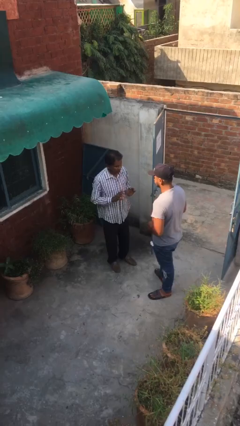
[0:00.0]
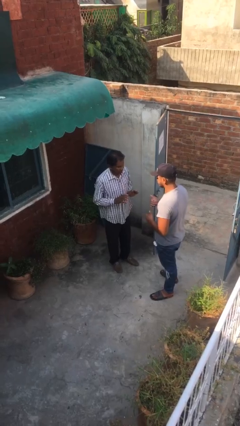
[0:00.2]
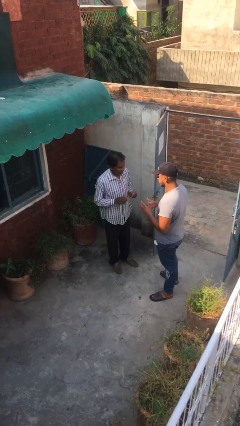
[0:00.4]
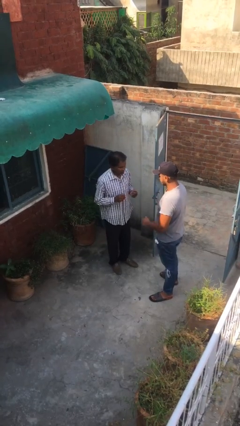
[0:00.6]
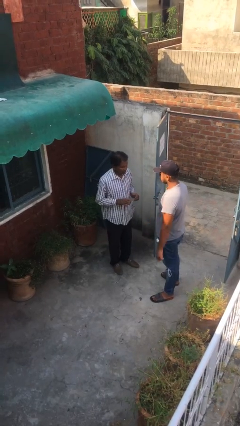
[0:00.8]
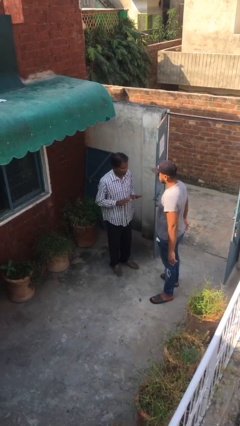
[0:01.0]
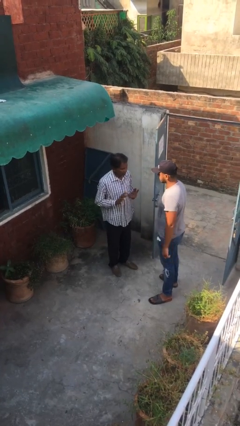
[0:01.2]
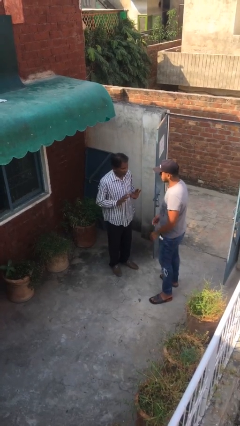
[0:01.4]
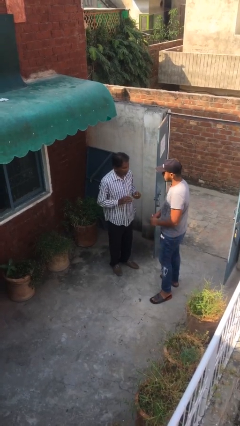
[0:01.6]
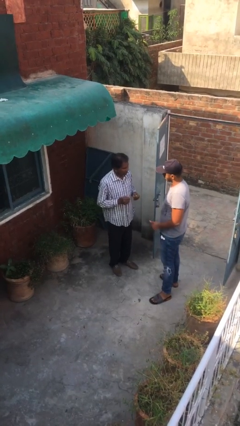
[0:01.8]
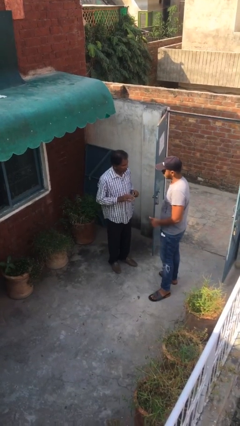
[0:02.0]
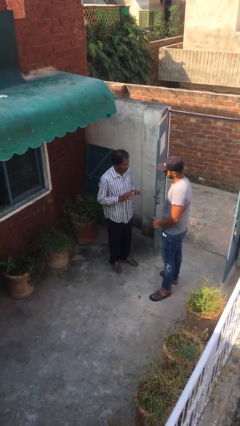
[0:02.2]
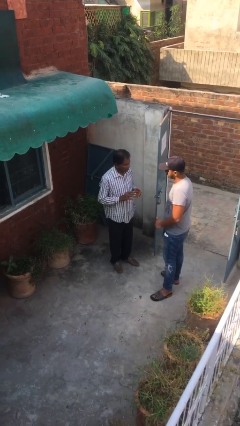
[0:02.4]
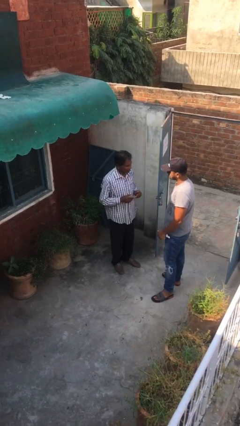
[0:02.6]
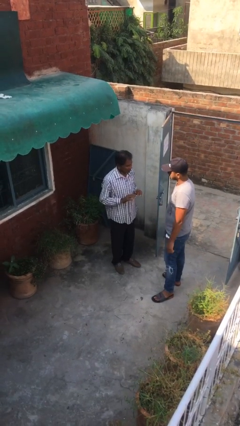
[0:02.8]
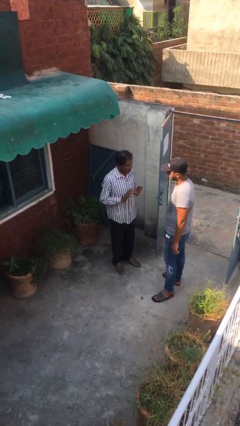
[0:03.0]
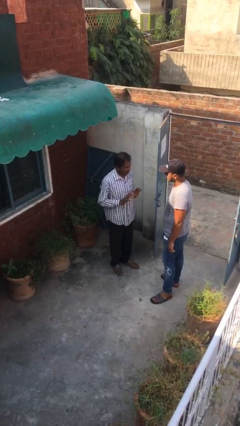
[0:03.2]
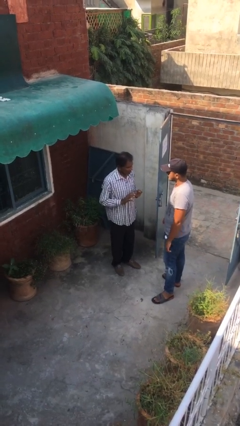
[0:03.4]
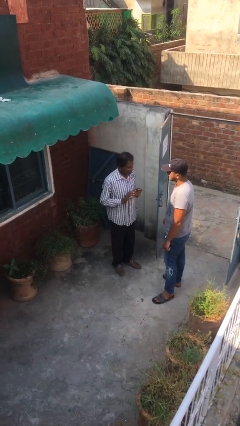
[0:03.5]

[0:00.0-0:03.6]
person talks to person

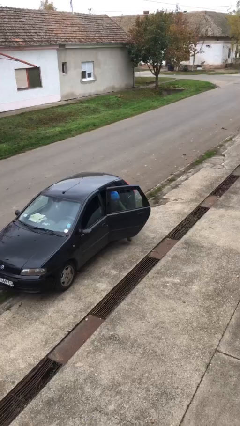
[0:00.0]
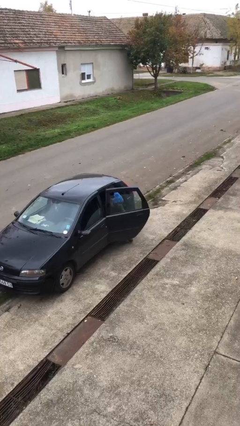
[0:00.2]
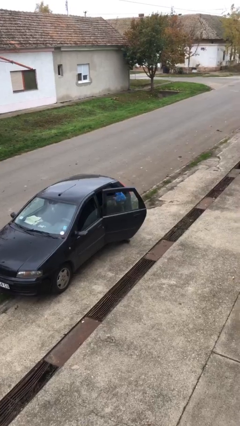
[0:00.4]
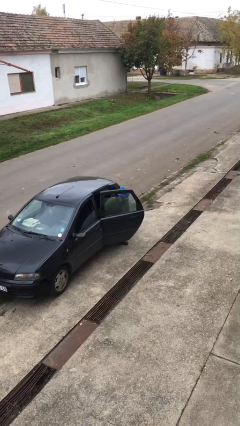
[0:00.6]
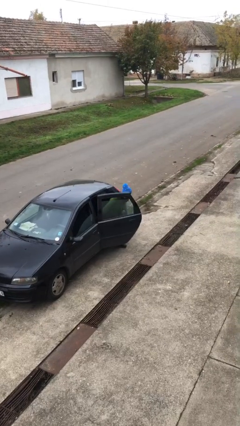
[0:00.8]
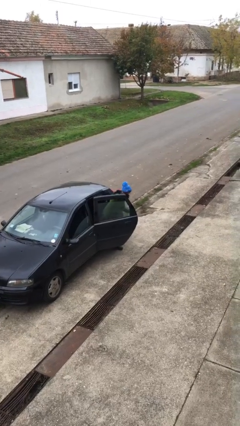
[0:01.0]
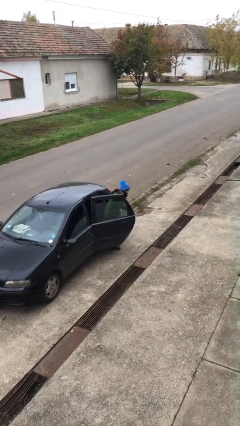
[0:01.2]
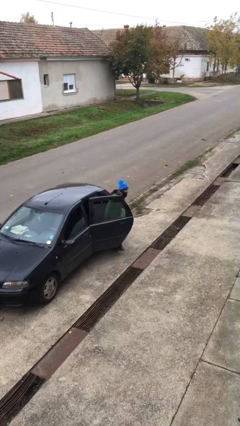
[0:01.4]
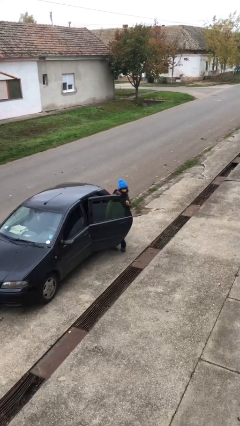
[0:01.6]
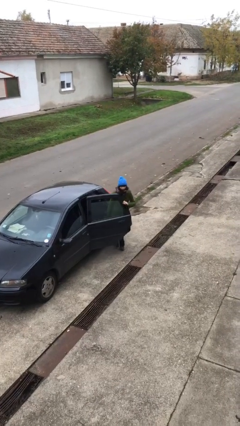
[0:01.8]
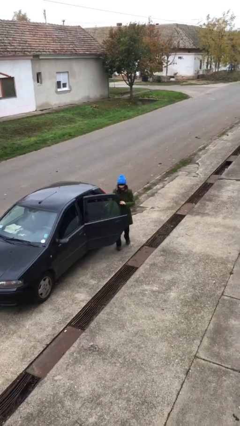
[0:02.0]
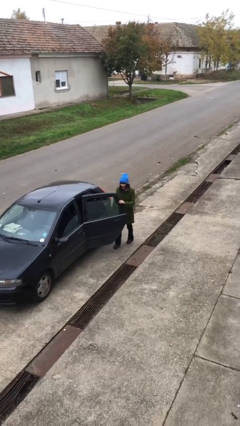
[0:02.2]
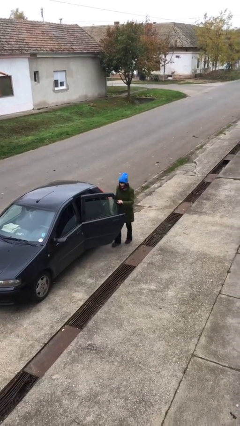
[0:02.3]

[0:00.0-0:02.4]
person exits car

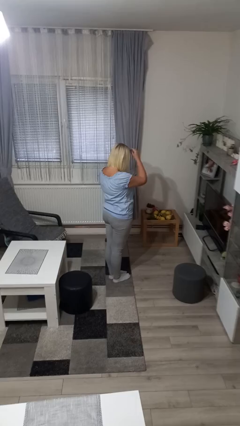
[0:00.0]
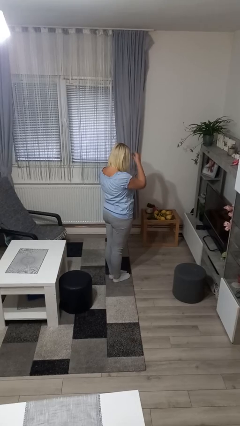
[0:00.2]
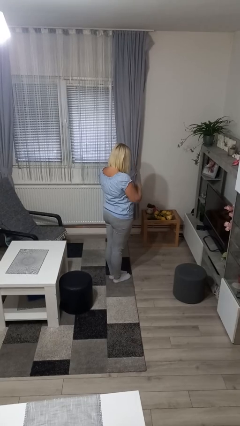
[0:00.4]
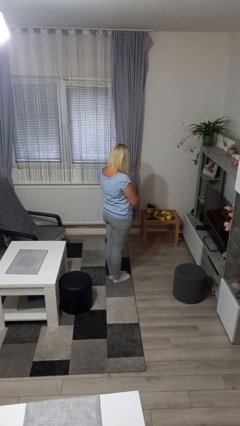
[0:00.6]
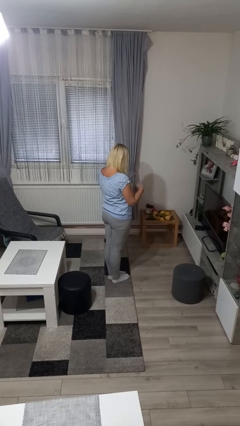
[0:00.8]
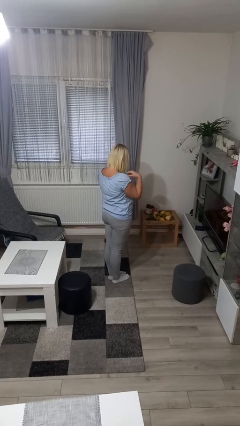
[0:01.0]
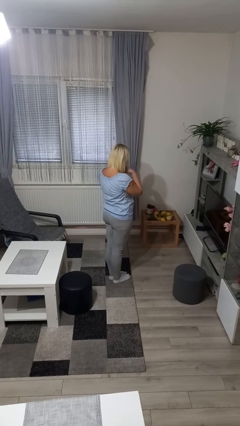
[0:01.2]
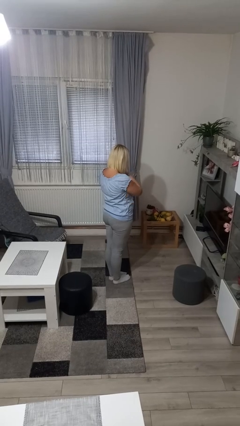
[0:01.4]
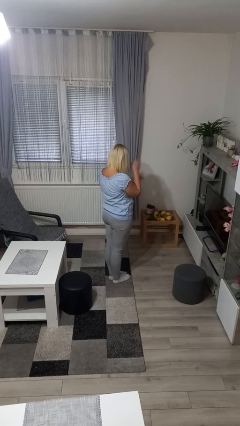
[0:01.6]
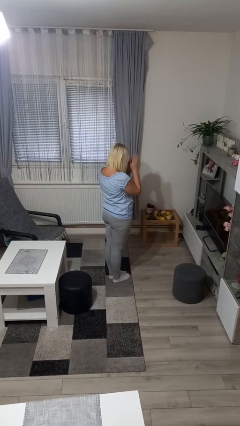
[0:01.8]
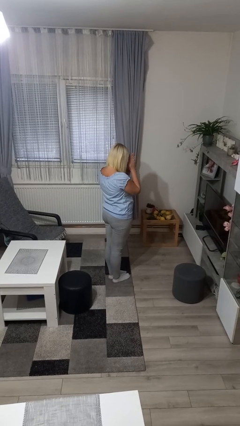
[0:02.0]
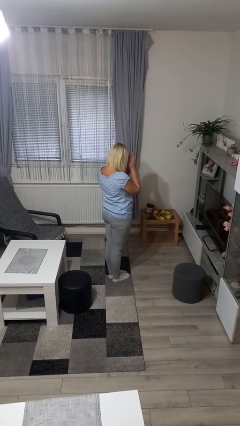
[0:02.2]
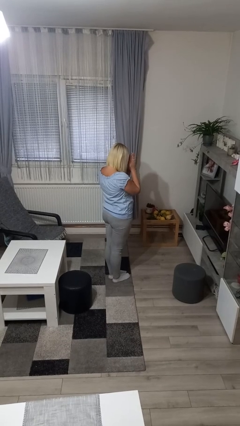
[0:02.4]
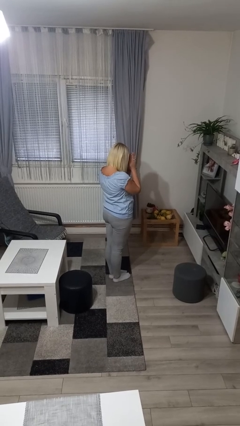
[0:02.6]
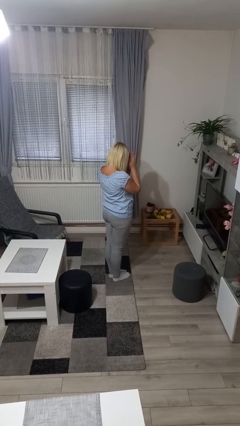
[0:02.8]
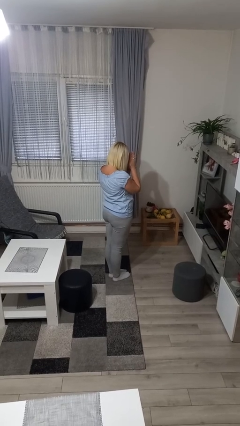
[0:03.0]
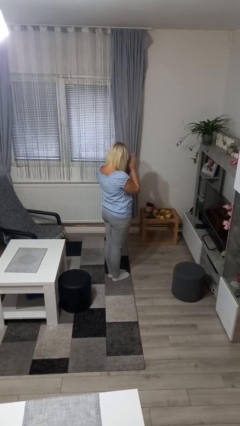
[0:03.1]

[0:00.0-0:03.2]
person prays

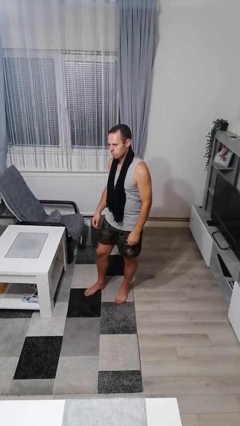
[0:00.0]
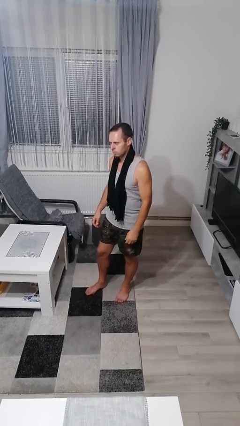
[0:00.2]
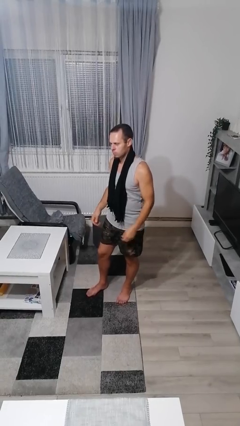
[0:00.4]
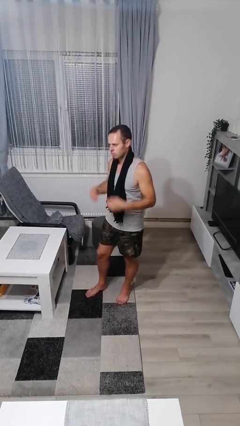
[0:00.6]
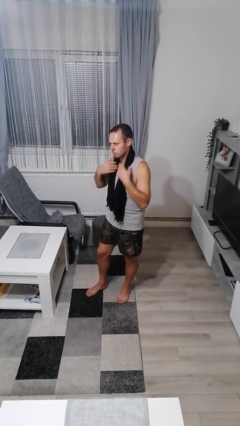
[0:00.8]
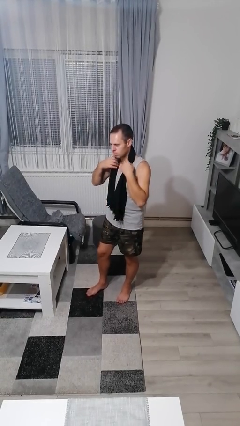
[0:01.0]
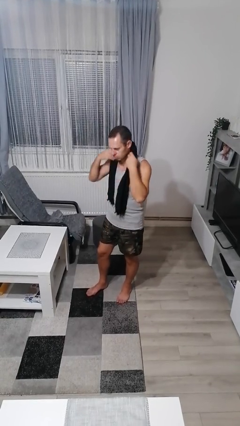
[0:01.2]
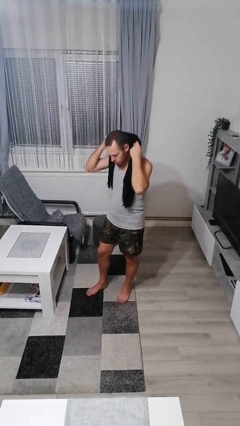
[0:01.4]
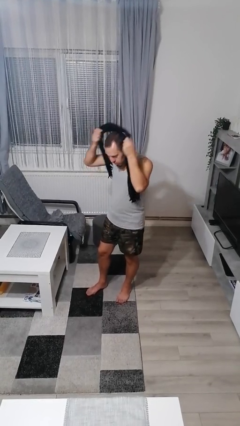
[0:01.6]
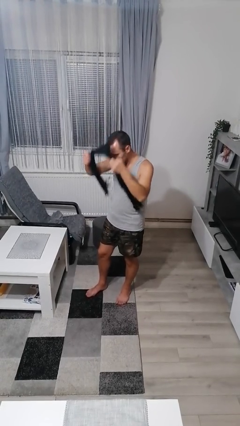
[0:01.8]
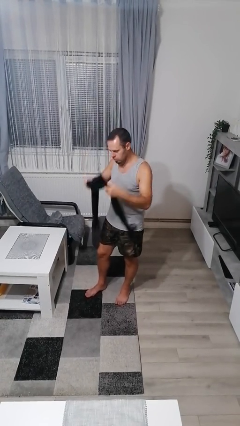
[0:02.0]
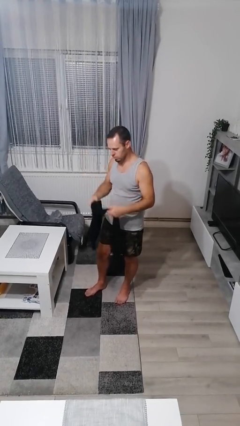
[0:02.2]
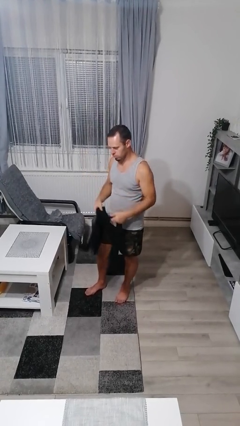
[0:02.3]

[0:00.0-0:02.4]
person takes off scarf

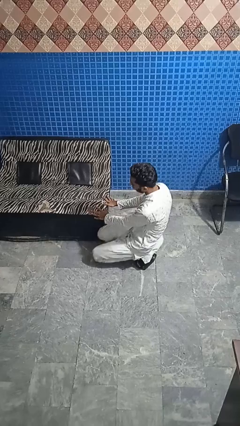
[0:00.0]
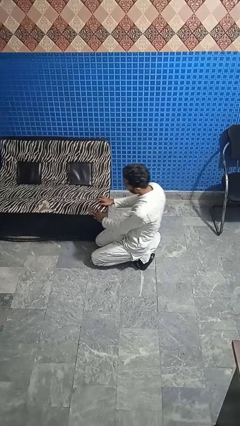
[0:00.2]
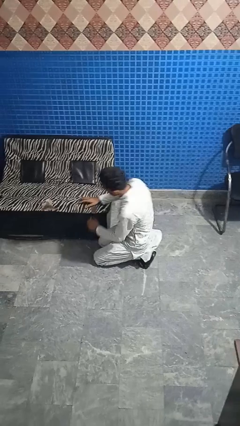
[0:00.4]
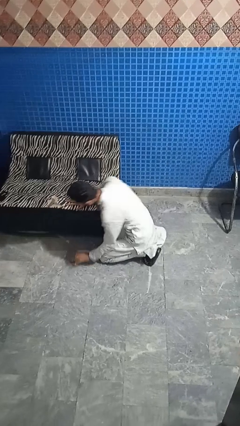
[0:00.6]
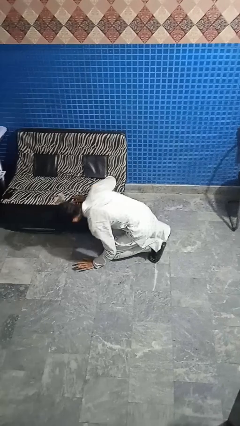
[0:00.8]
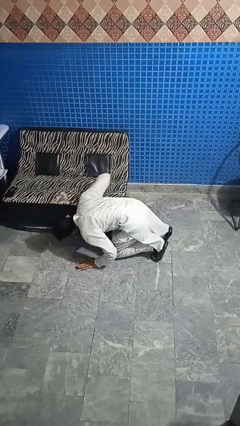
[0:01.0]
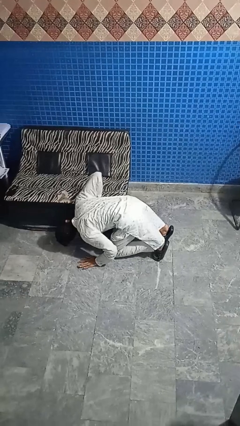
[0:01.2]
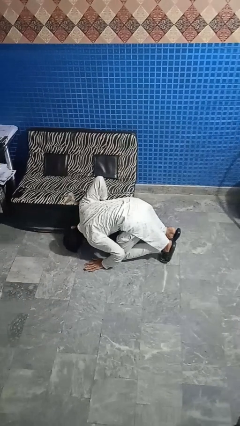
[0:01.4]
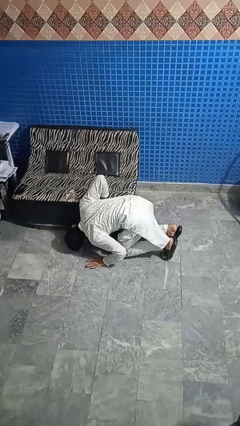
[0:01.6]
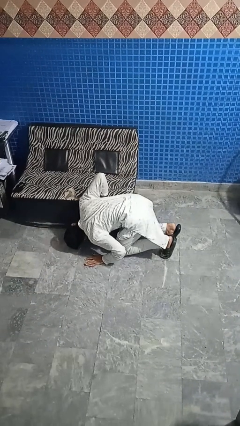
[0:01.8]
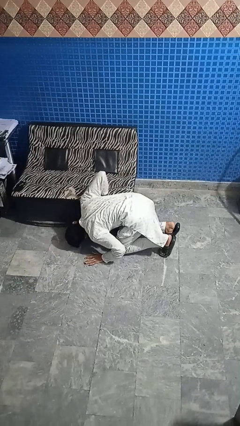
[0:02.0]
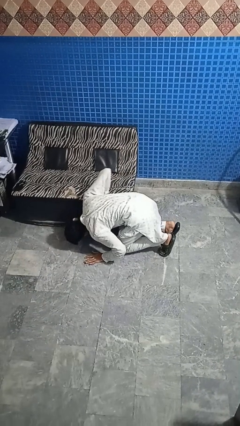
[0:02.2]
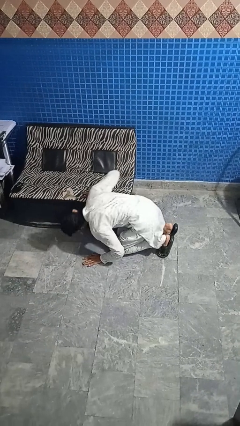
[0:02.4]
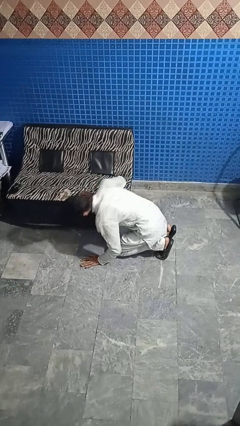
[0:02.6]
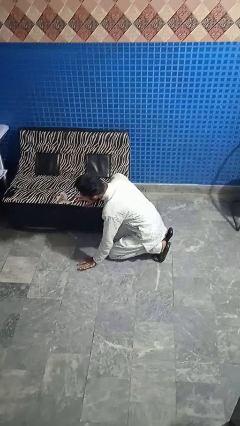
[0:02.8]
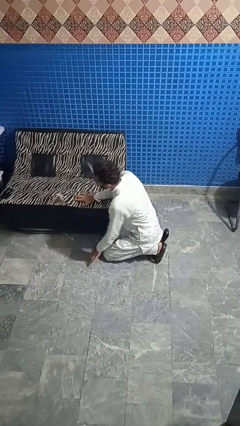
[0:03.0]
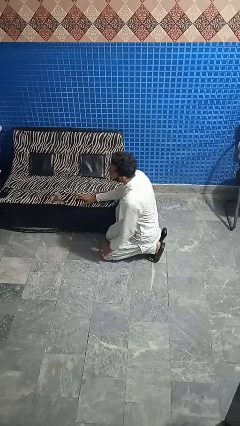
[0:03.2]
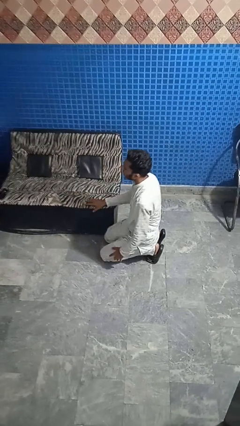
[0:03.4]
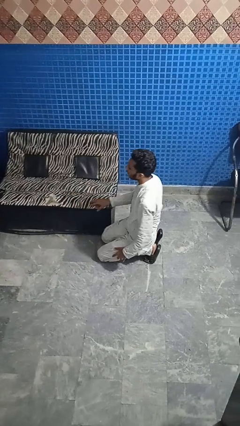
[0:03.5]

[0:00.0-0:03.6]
person searches under couch

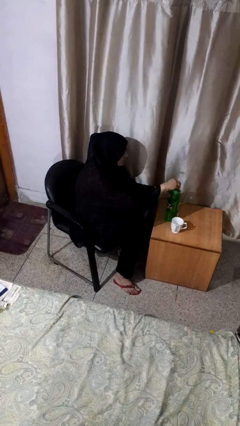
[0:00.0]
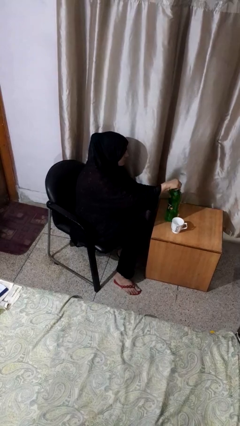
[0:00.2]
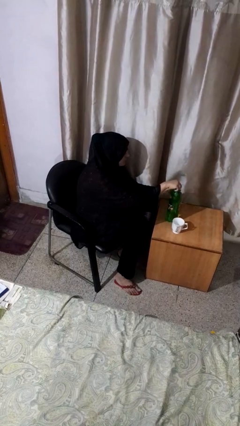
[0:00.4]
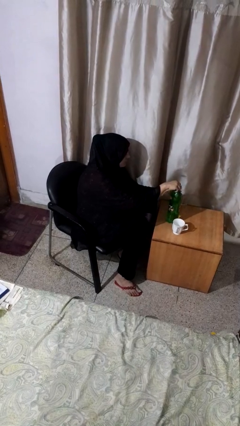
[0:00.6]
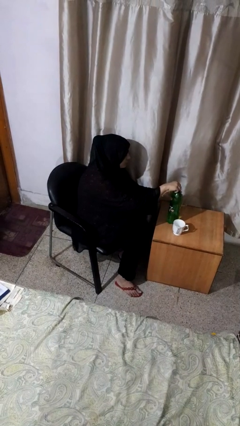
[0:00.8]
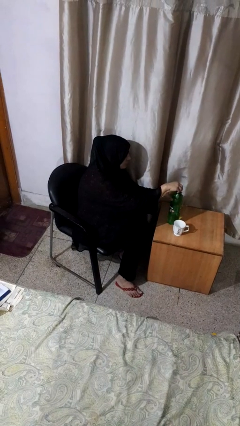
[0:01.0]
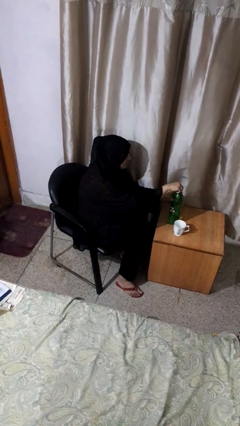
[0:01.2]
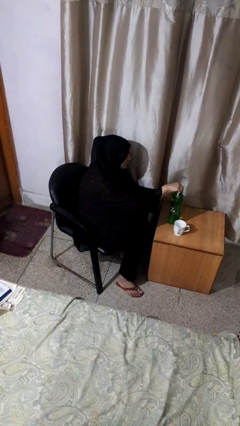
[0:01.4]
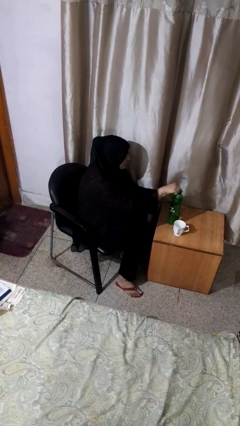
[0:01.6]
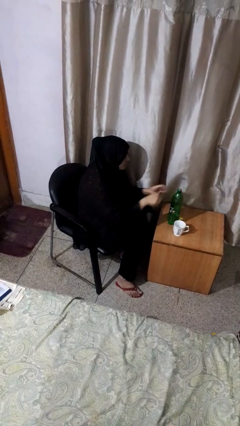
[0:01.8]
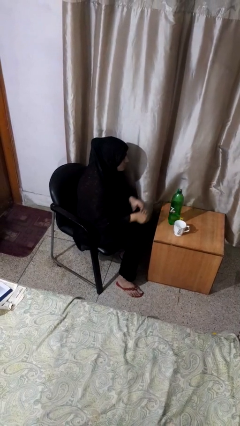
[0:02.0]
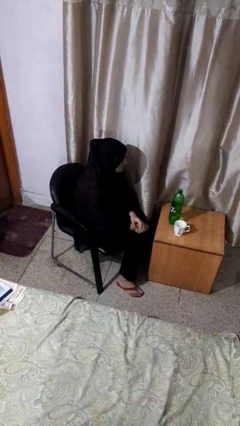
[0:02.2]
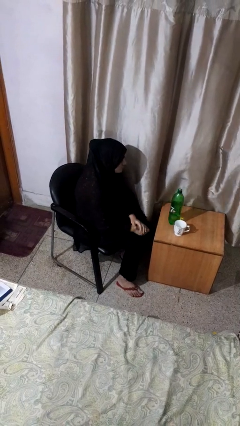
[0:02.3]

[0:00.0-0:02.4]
person screws lid to bottle
